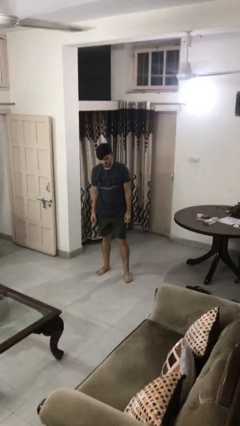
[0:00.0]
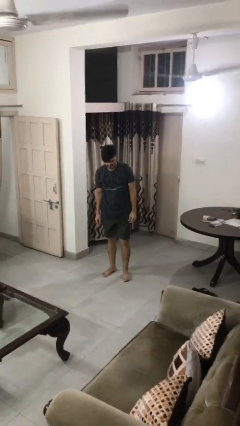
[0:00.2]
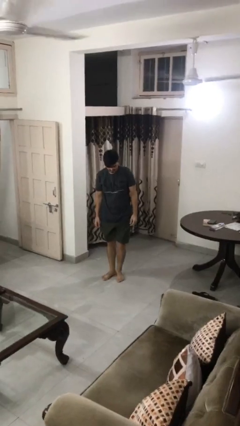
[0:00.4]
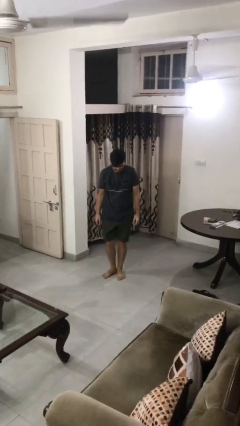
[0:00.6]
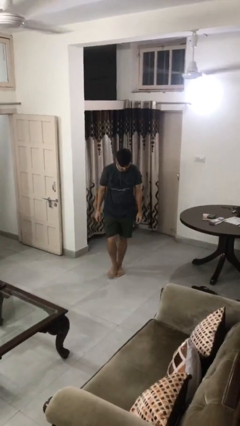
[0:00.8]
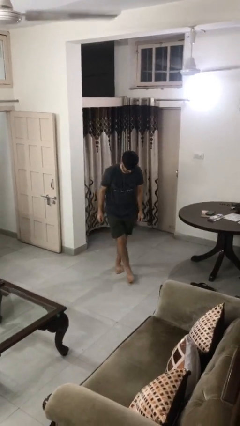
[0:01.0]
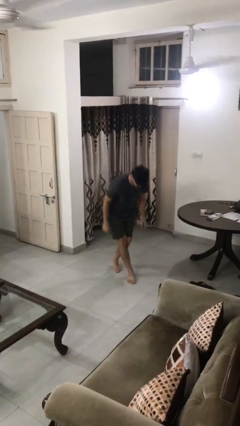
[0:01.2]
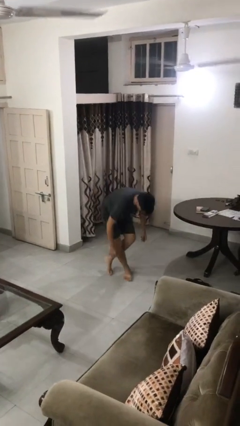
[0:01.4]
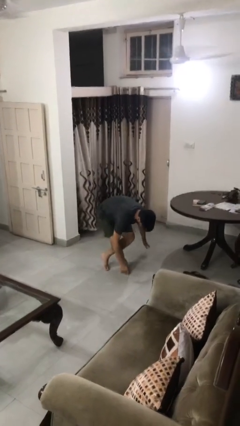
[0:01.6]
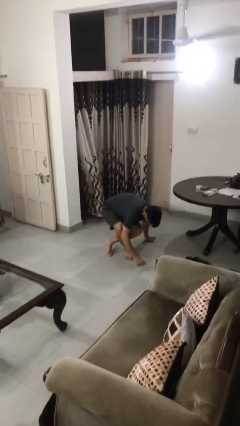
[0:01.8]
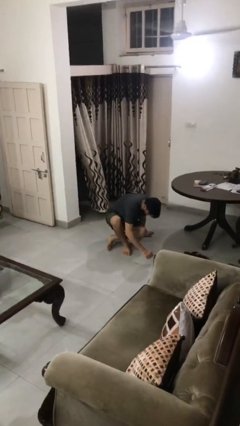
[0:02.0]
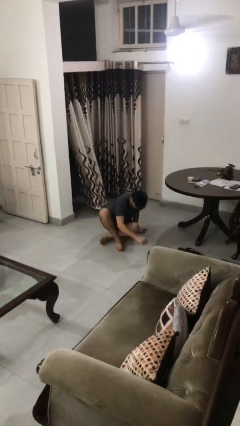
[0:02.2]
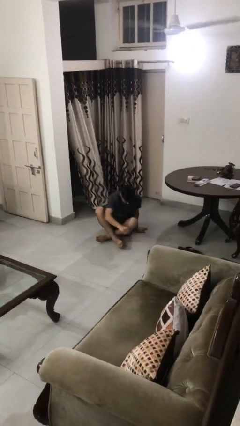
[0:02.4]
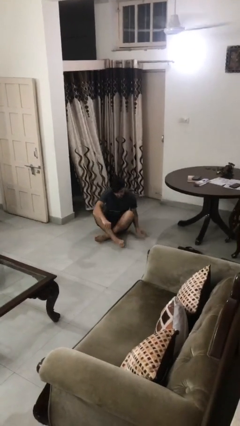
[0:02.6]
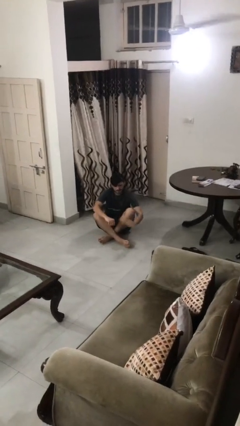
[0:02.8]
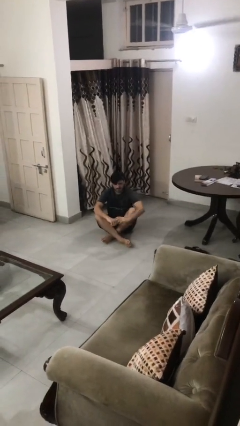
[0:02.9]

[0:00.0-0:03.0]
person sits crisscross

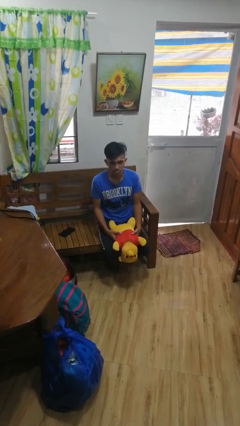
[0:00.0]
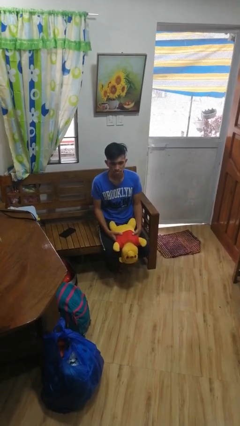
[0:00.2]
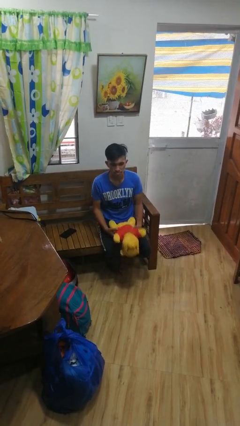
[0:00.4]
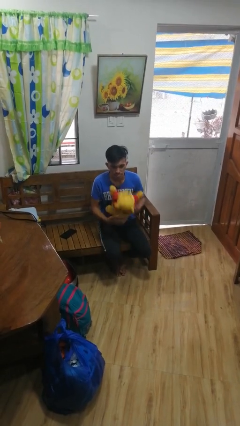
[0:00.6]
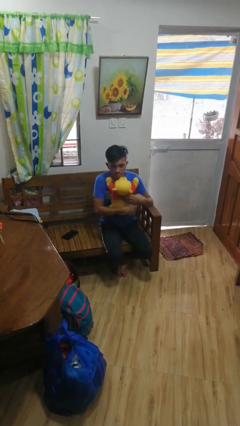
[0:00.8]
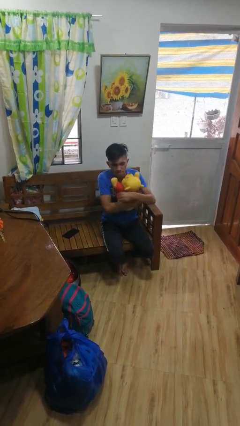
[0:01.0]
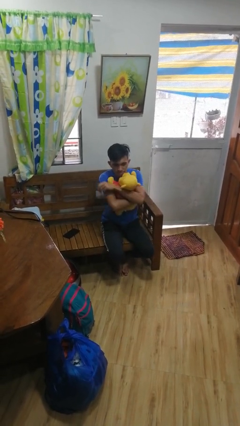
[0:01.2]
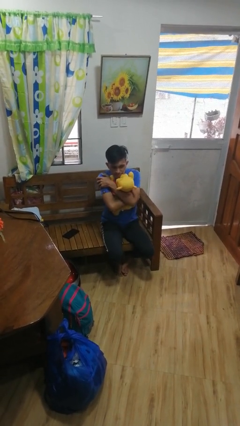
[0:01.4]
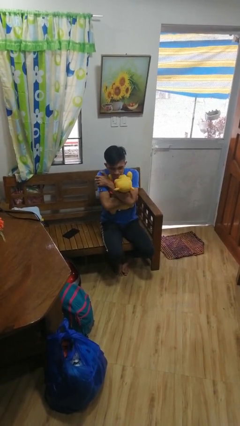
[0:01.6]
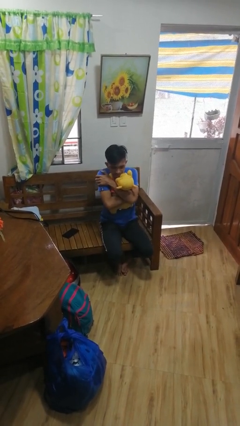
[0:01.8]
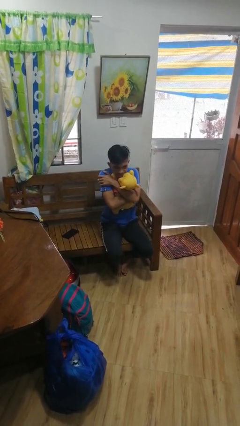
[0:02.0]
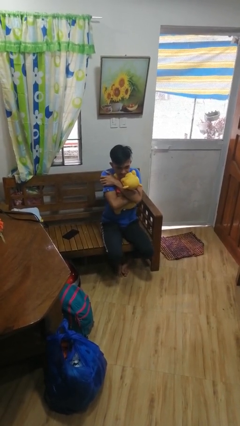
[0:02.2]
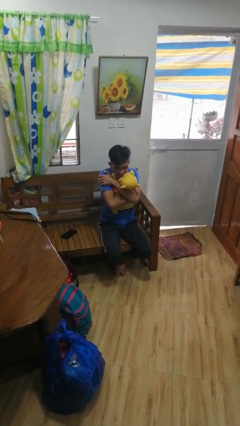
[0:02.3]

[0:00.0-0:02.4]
person hugs stuffed animal

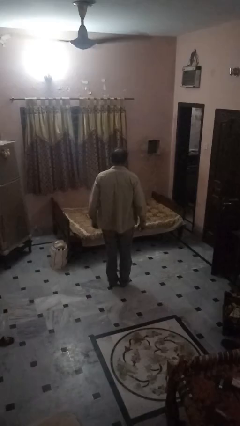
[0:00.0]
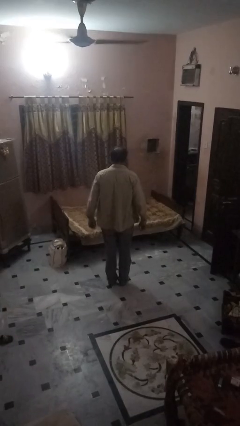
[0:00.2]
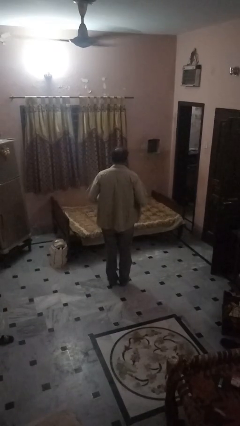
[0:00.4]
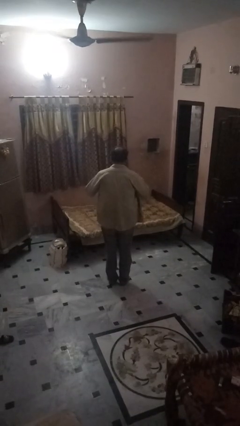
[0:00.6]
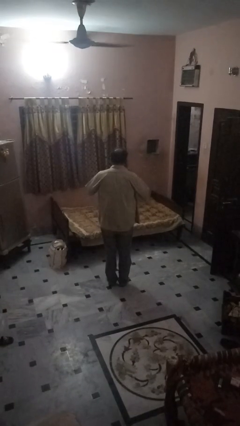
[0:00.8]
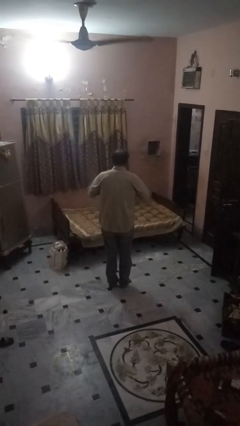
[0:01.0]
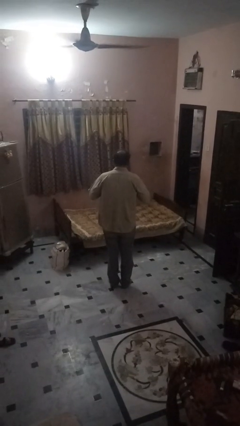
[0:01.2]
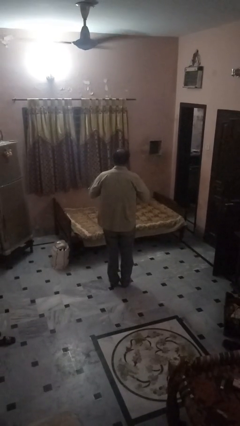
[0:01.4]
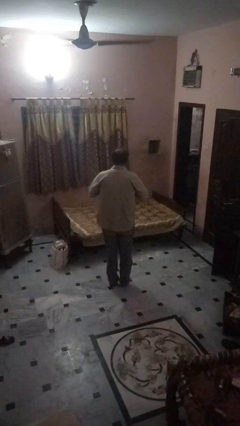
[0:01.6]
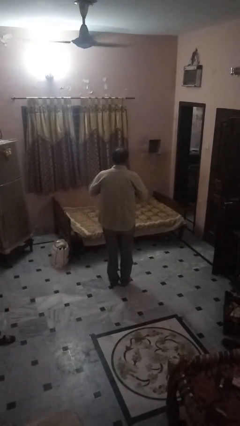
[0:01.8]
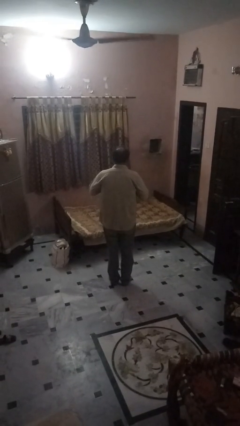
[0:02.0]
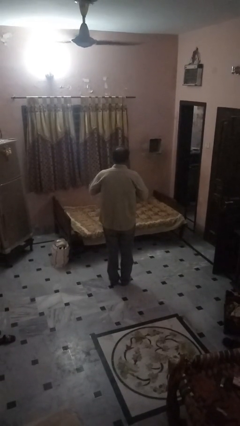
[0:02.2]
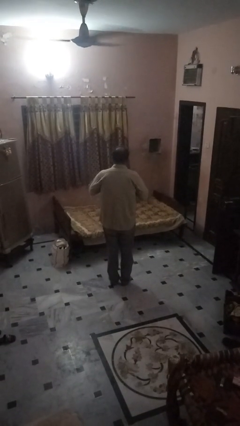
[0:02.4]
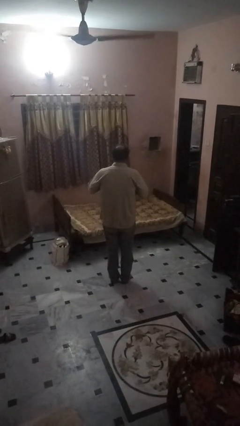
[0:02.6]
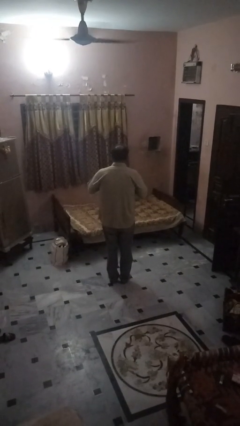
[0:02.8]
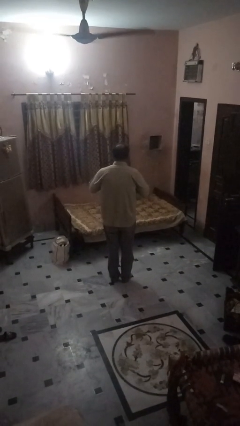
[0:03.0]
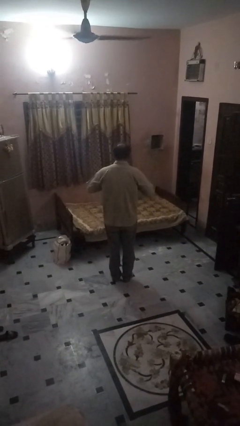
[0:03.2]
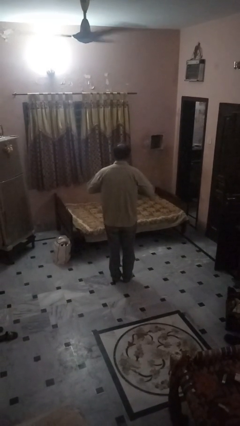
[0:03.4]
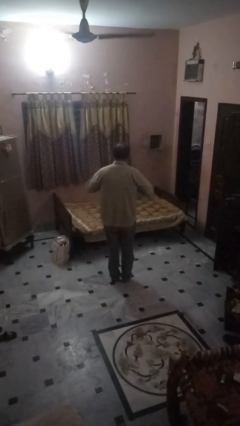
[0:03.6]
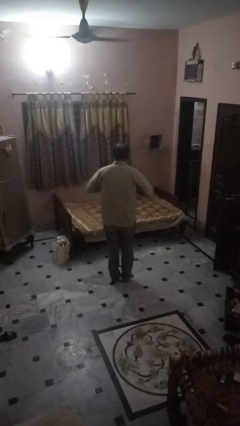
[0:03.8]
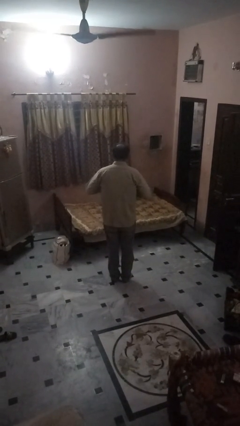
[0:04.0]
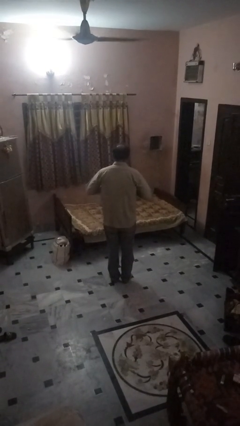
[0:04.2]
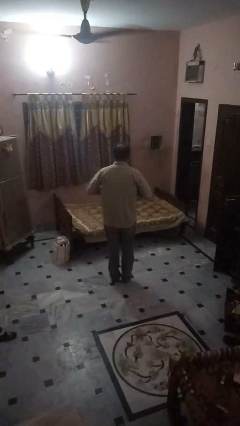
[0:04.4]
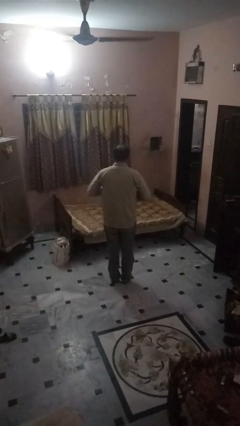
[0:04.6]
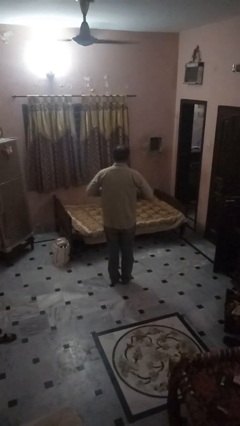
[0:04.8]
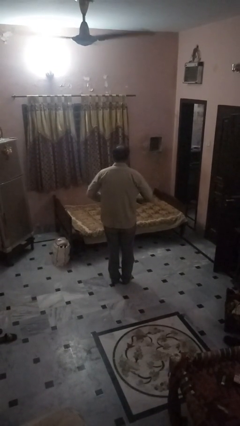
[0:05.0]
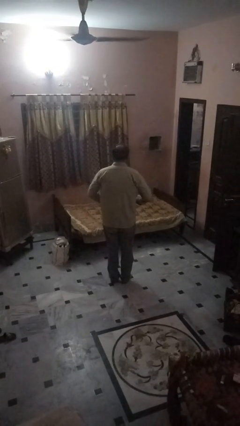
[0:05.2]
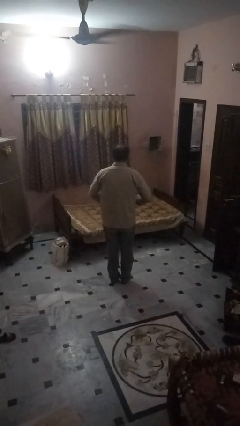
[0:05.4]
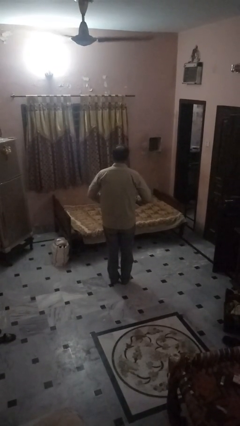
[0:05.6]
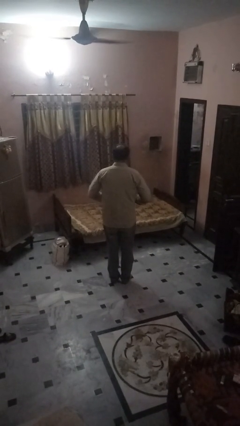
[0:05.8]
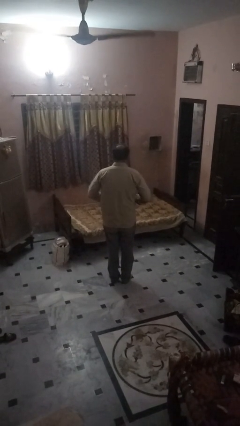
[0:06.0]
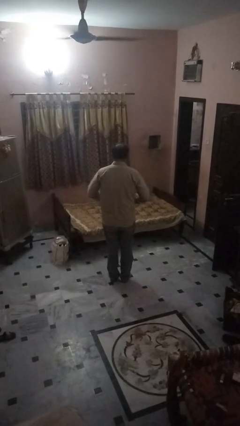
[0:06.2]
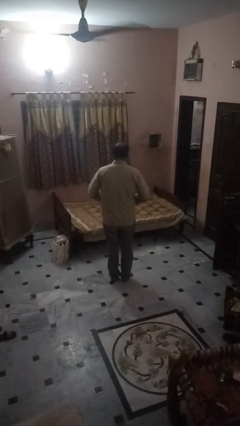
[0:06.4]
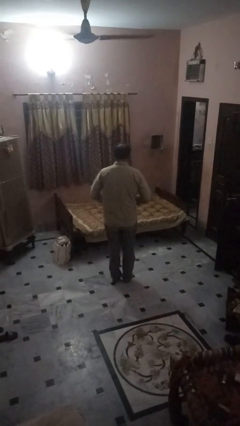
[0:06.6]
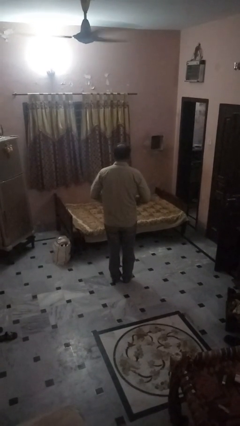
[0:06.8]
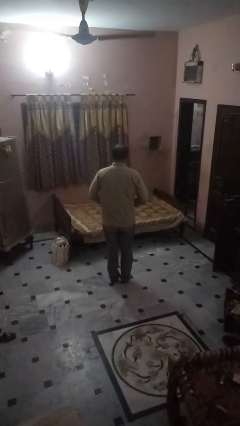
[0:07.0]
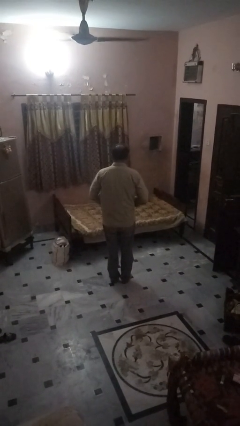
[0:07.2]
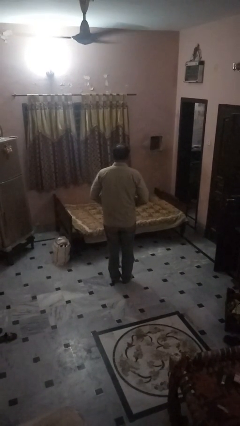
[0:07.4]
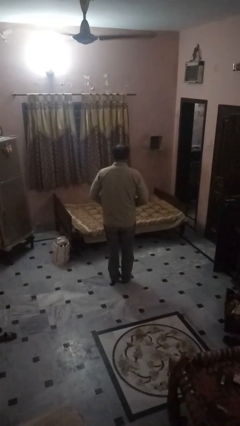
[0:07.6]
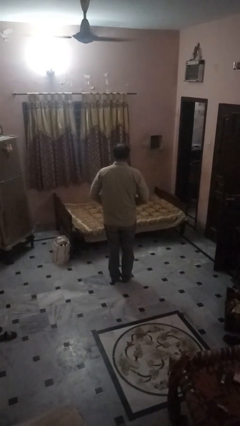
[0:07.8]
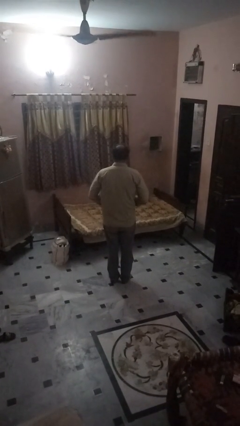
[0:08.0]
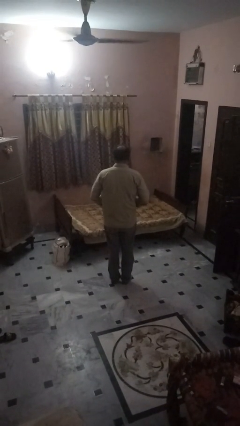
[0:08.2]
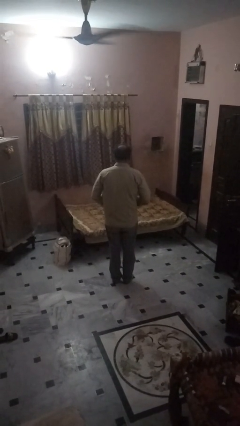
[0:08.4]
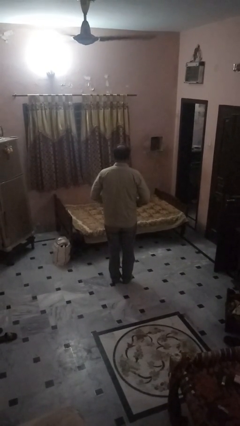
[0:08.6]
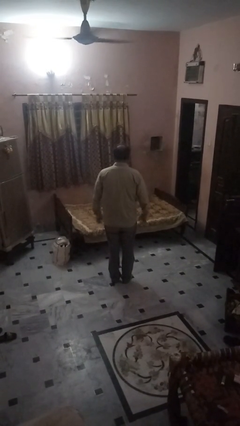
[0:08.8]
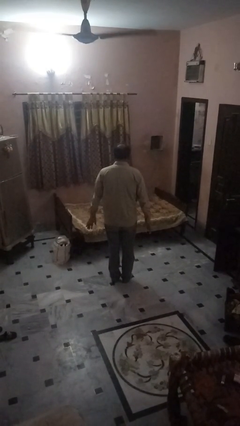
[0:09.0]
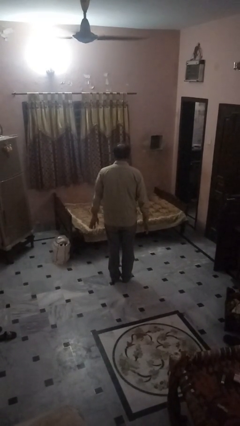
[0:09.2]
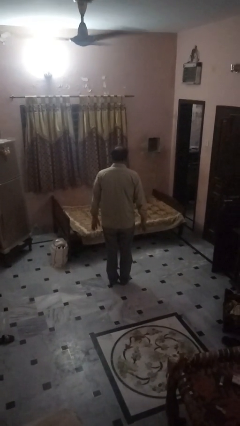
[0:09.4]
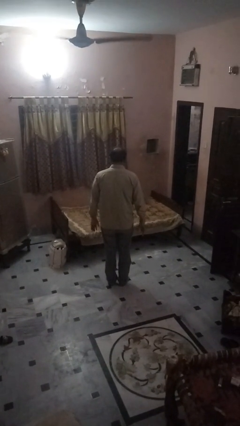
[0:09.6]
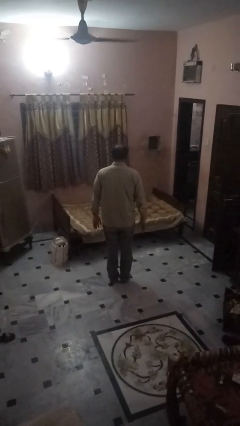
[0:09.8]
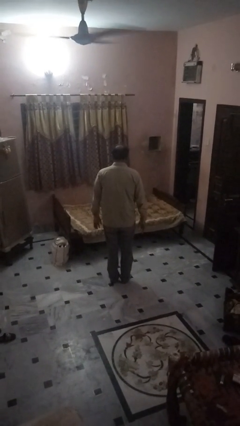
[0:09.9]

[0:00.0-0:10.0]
person buttons shirt

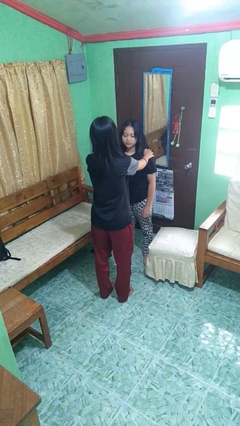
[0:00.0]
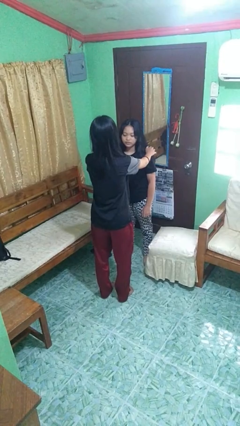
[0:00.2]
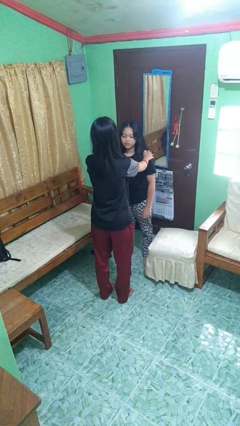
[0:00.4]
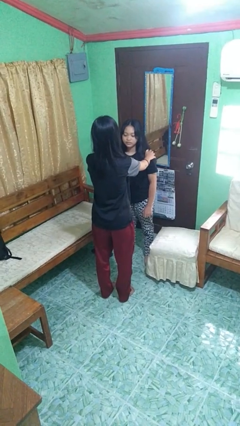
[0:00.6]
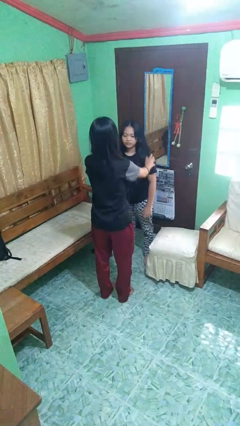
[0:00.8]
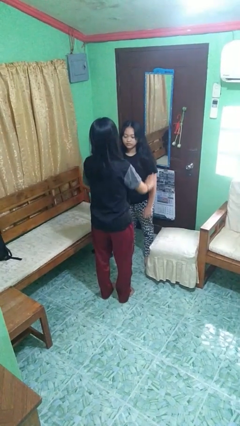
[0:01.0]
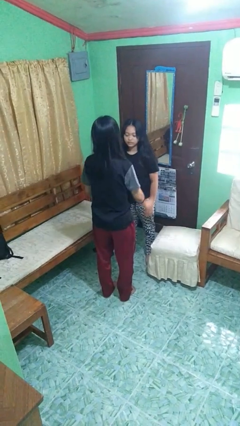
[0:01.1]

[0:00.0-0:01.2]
person pounds shoulders of person

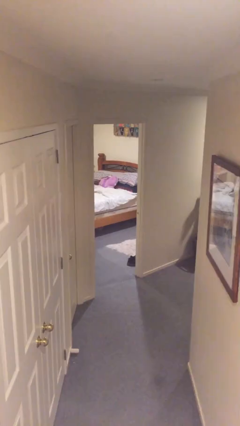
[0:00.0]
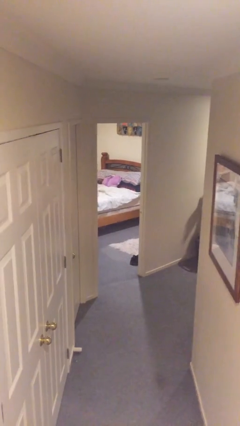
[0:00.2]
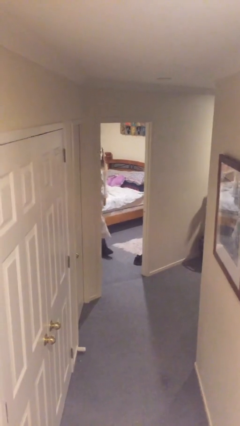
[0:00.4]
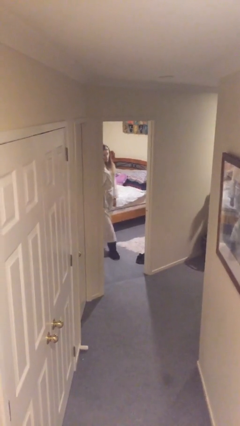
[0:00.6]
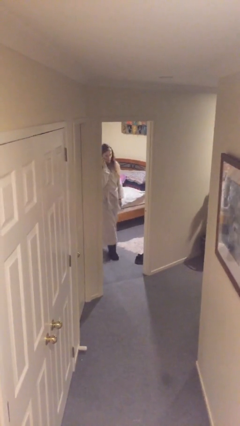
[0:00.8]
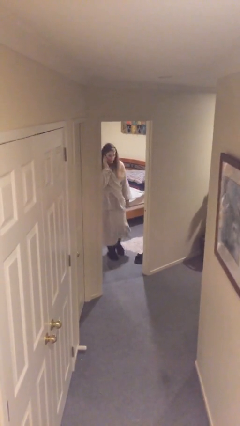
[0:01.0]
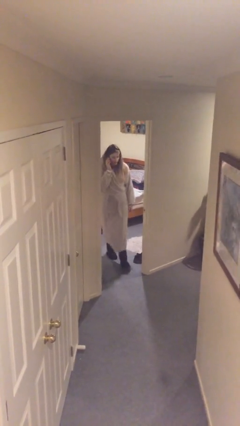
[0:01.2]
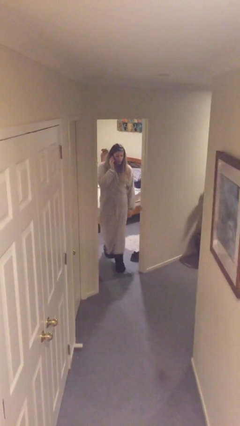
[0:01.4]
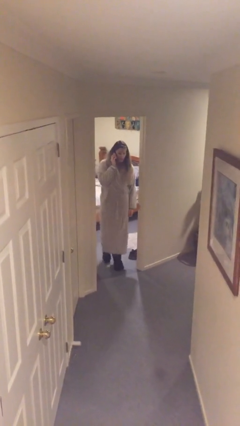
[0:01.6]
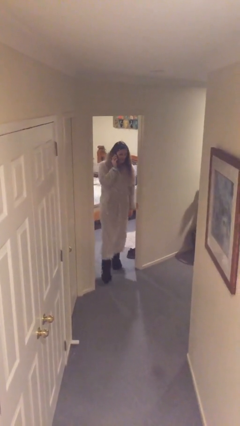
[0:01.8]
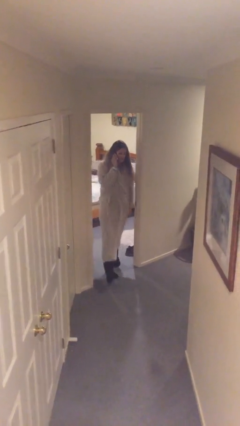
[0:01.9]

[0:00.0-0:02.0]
person enters scene through structure
